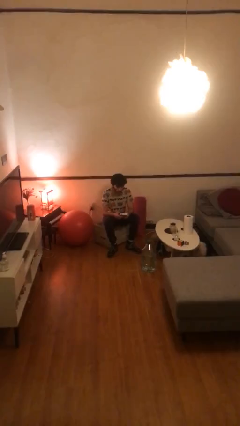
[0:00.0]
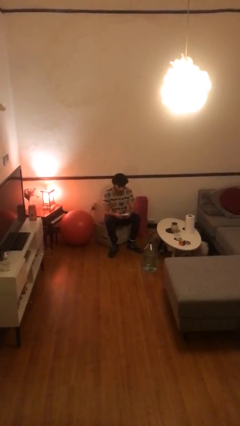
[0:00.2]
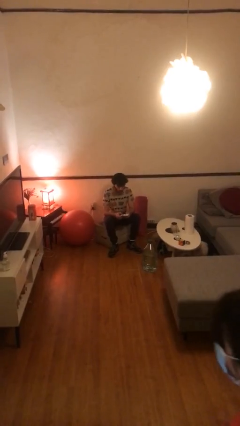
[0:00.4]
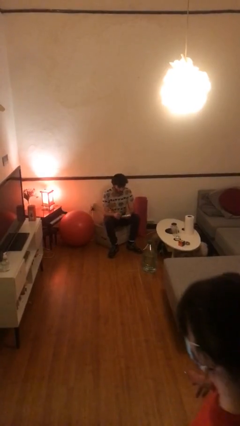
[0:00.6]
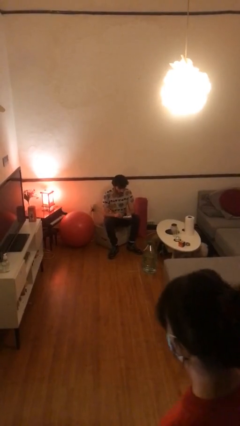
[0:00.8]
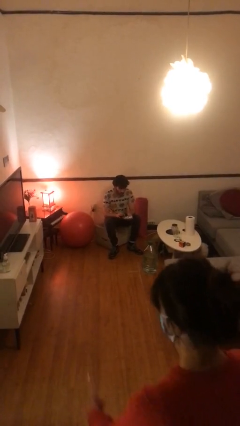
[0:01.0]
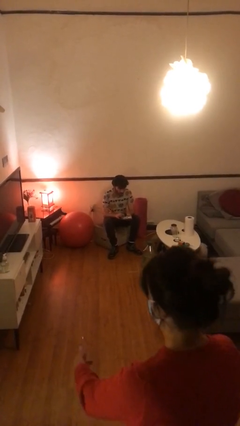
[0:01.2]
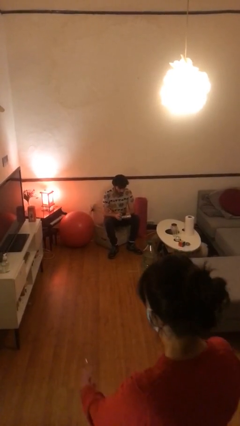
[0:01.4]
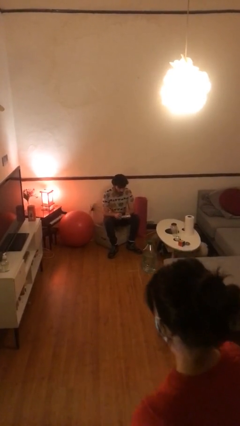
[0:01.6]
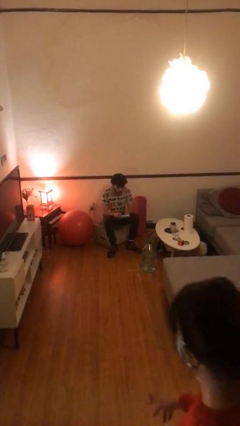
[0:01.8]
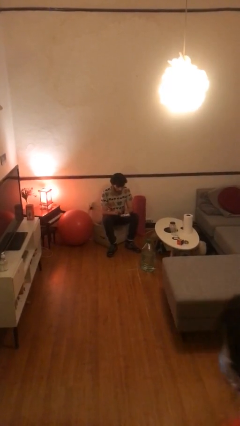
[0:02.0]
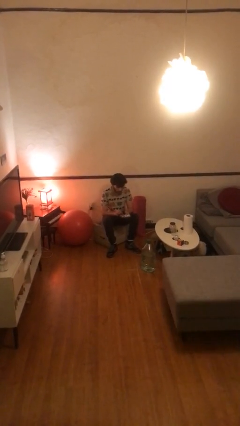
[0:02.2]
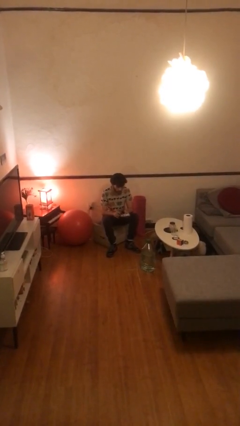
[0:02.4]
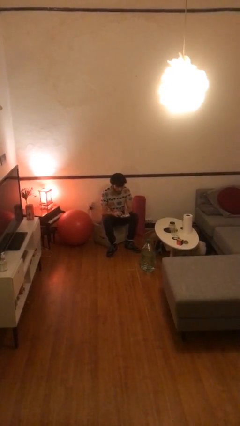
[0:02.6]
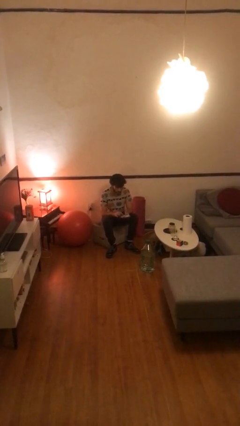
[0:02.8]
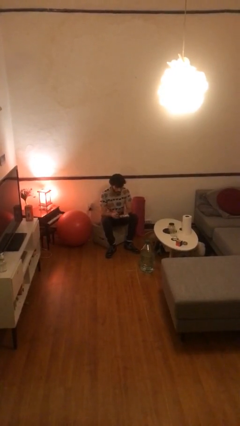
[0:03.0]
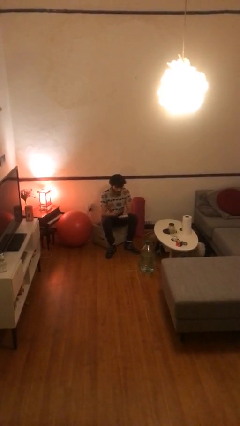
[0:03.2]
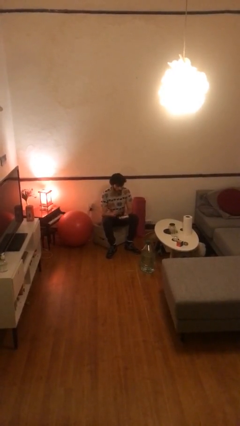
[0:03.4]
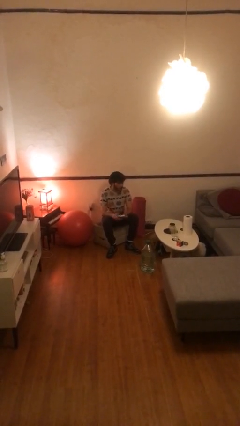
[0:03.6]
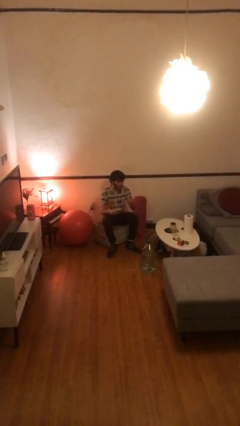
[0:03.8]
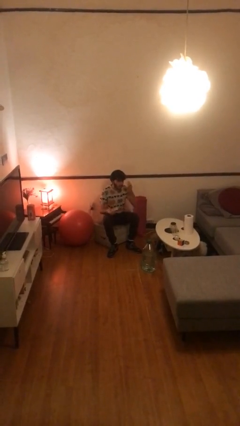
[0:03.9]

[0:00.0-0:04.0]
person interacts with handheld game

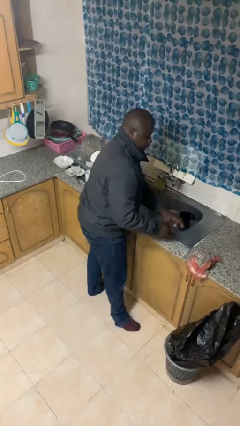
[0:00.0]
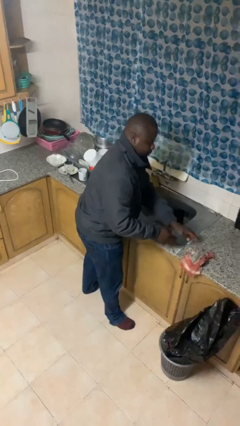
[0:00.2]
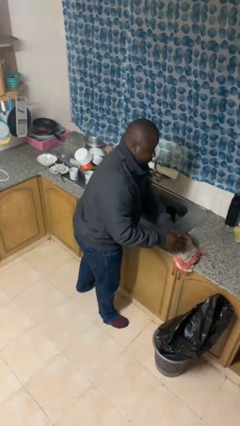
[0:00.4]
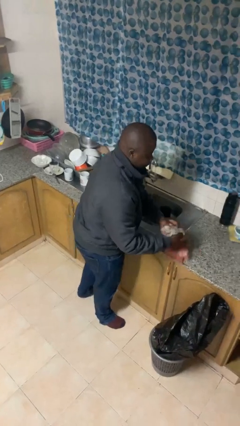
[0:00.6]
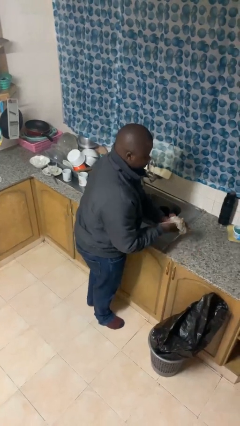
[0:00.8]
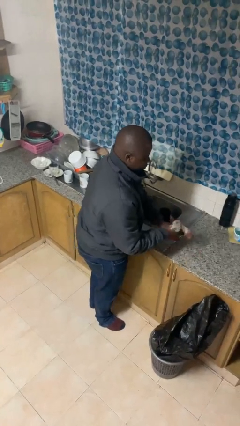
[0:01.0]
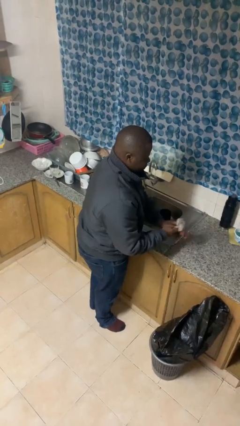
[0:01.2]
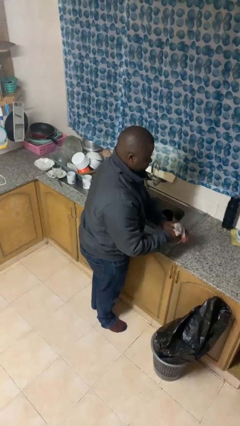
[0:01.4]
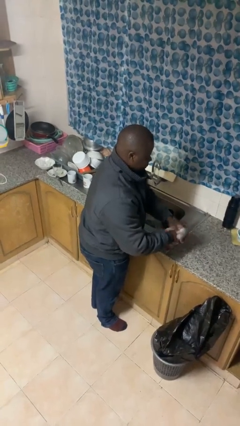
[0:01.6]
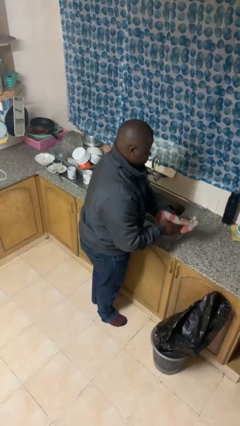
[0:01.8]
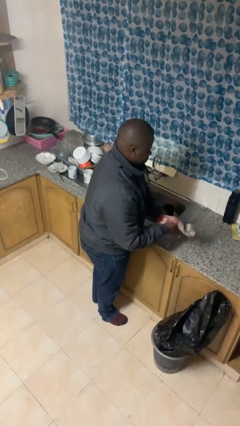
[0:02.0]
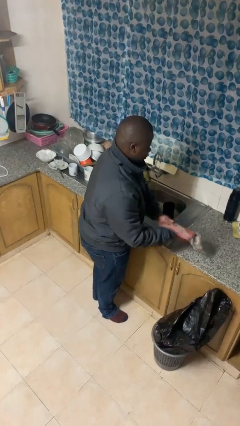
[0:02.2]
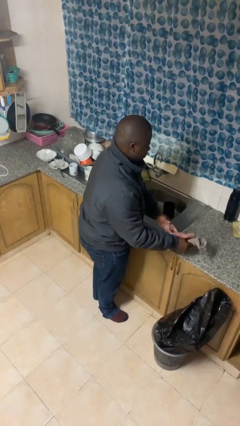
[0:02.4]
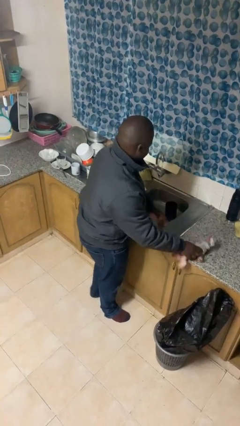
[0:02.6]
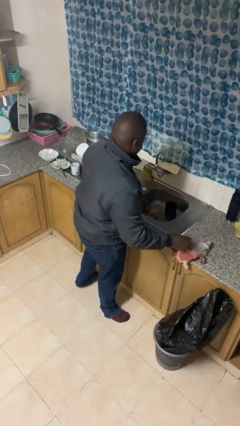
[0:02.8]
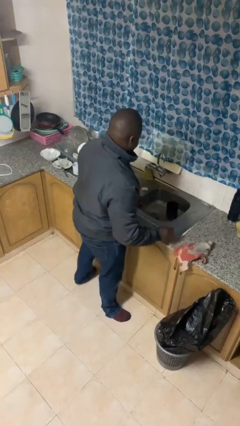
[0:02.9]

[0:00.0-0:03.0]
person dries hands with towel

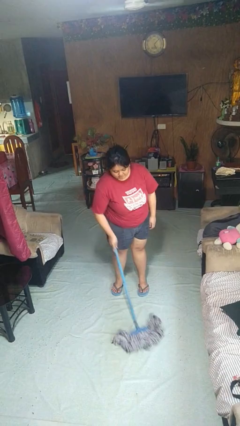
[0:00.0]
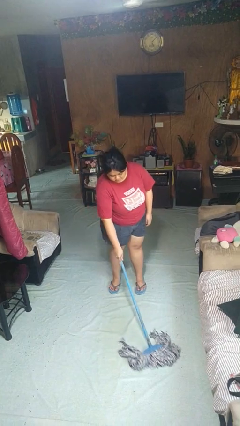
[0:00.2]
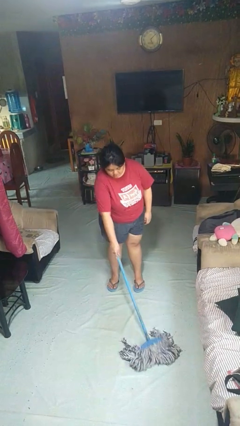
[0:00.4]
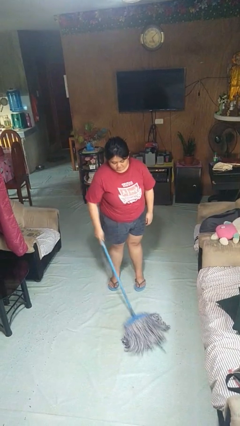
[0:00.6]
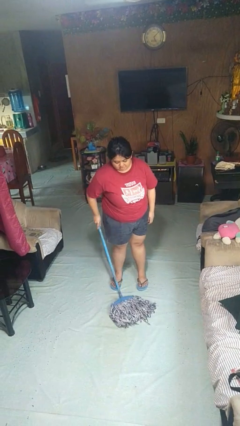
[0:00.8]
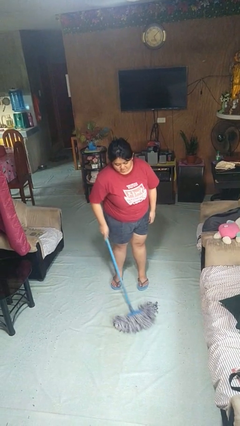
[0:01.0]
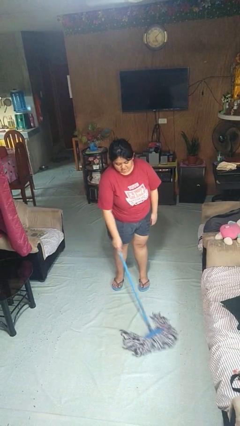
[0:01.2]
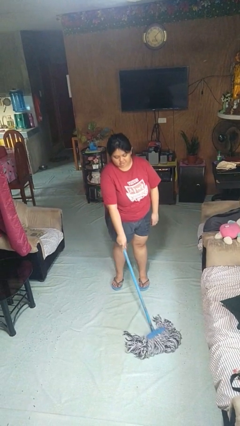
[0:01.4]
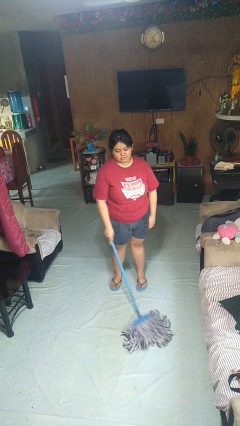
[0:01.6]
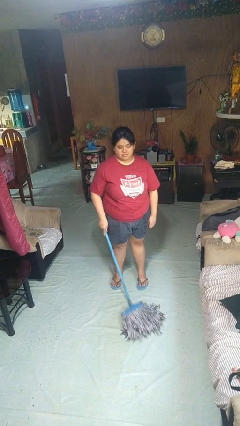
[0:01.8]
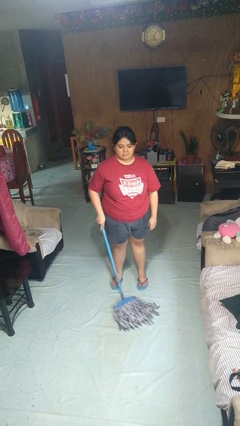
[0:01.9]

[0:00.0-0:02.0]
person mops

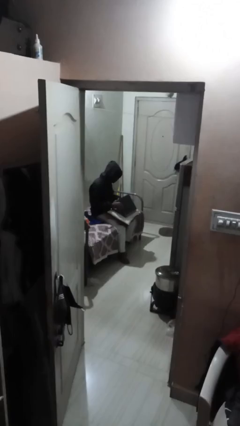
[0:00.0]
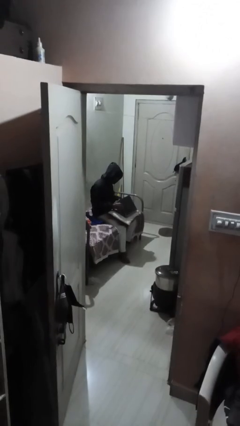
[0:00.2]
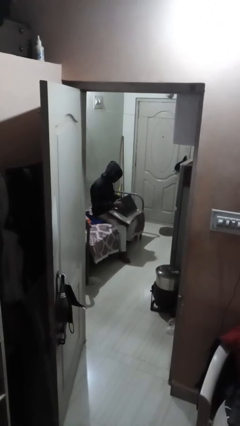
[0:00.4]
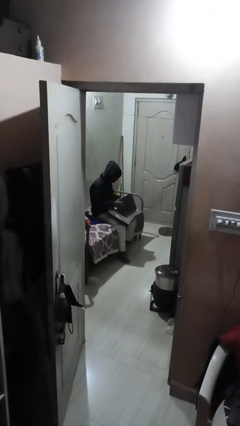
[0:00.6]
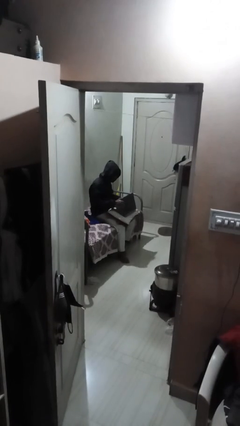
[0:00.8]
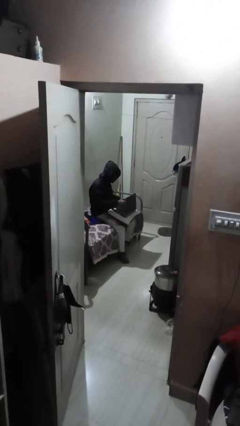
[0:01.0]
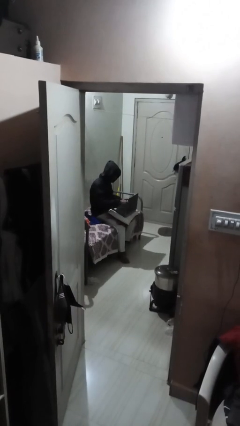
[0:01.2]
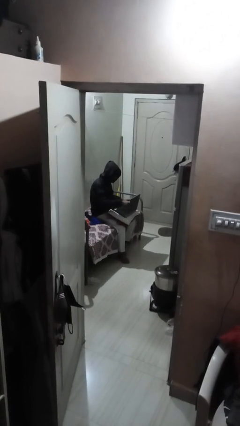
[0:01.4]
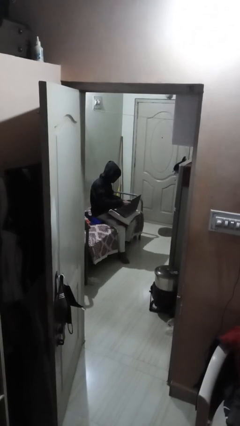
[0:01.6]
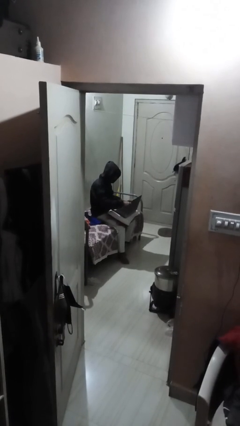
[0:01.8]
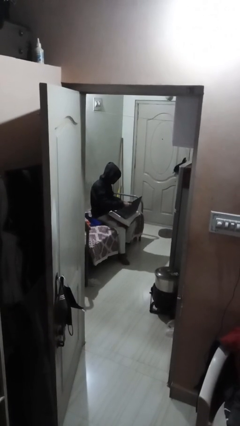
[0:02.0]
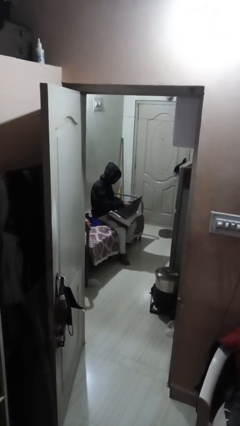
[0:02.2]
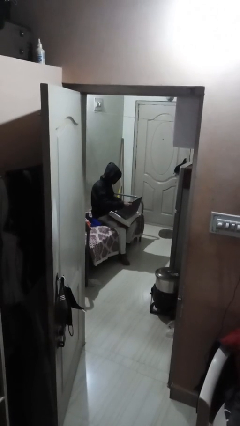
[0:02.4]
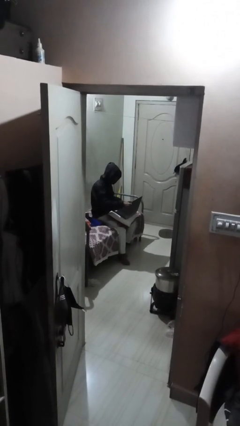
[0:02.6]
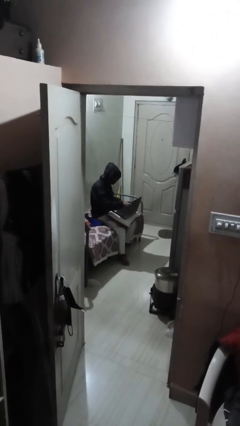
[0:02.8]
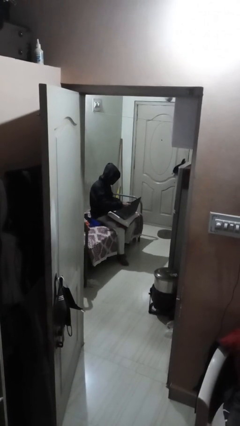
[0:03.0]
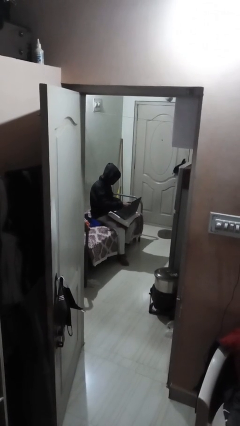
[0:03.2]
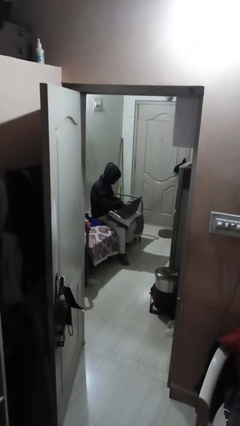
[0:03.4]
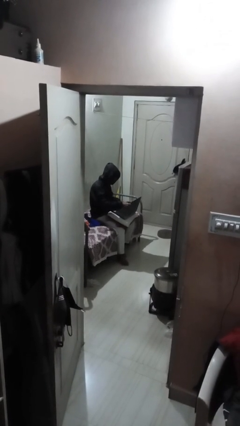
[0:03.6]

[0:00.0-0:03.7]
person interacts with laptop

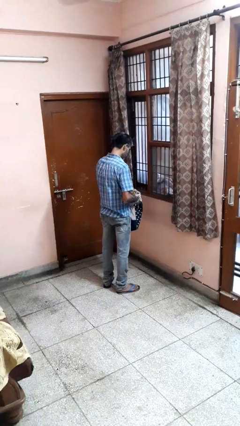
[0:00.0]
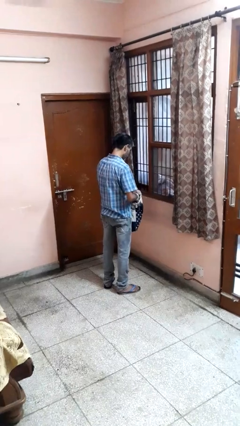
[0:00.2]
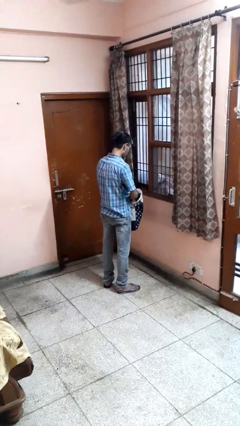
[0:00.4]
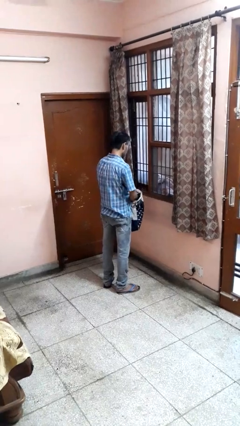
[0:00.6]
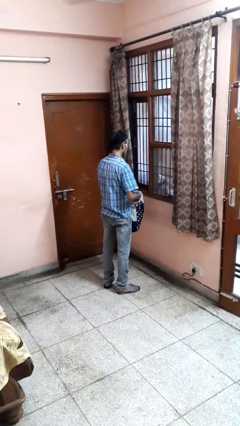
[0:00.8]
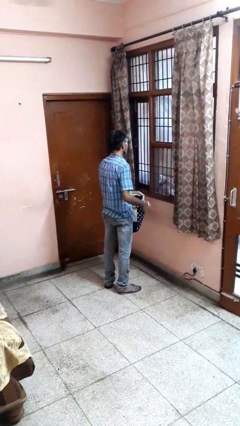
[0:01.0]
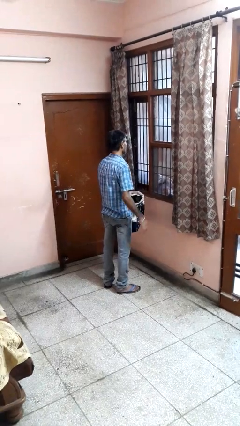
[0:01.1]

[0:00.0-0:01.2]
person puts object into bag

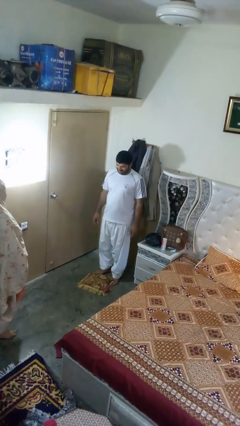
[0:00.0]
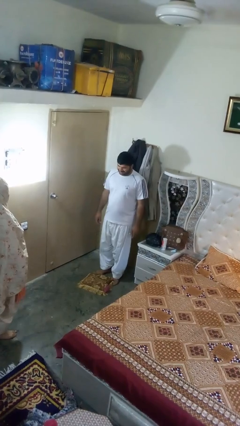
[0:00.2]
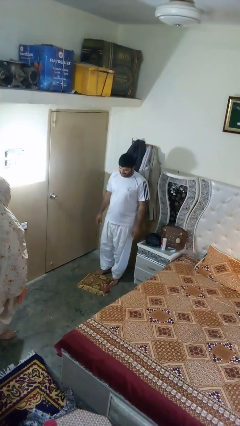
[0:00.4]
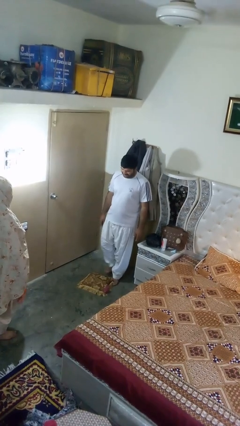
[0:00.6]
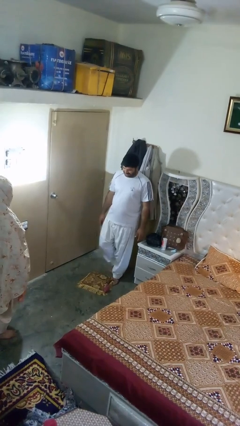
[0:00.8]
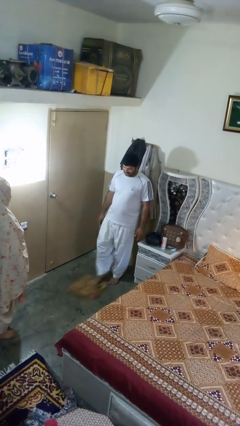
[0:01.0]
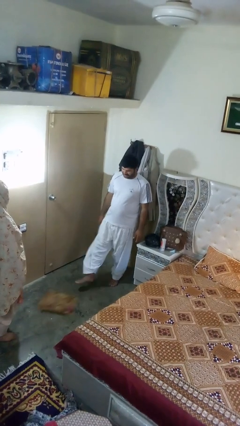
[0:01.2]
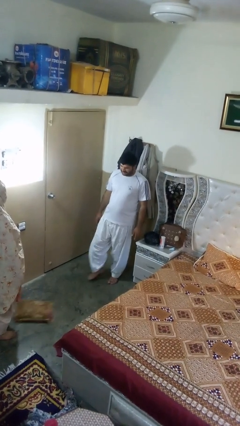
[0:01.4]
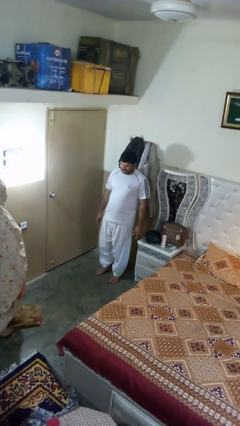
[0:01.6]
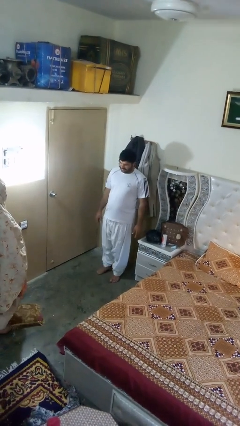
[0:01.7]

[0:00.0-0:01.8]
person kicks object to person

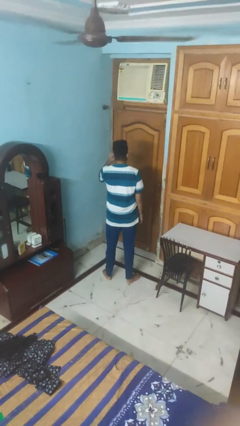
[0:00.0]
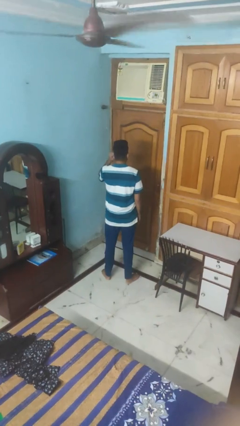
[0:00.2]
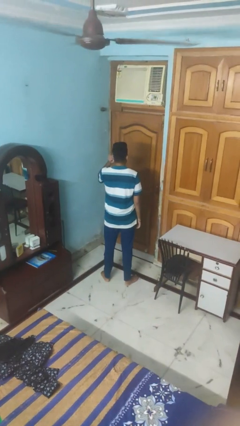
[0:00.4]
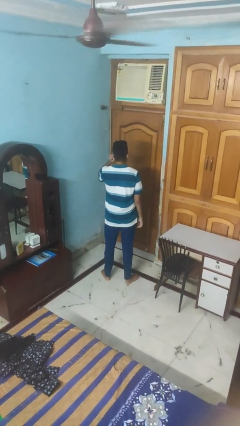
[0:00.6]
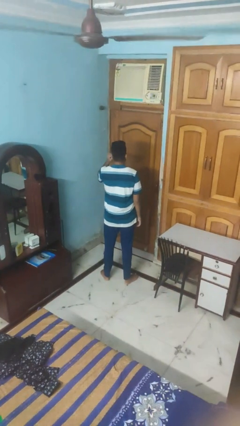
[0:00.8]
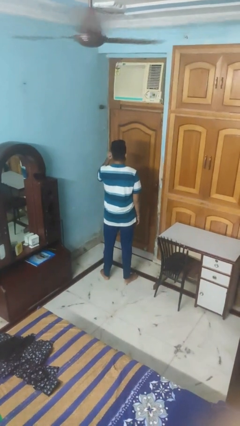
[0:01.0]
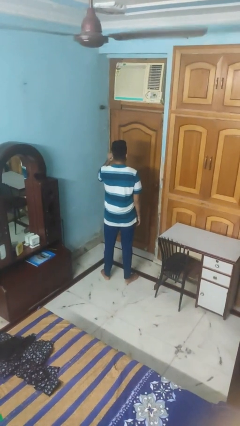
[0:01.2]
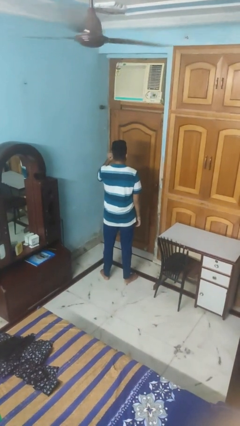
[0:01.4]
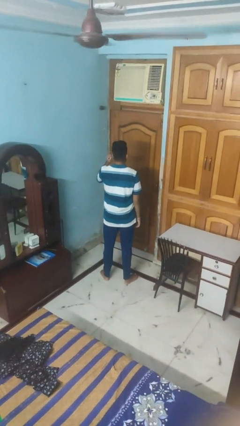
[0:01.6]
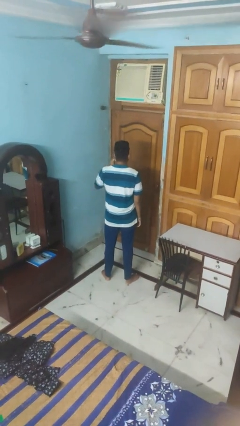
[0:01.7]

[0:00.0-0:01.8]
person touches earlobe
